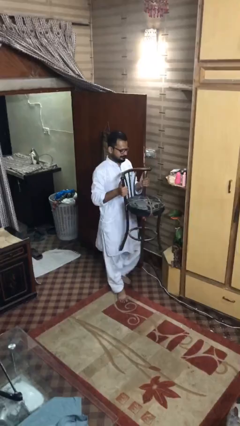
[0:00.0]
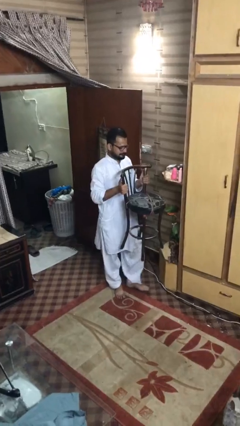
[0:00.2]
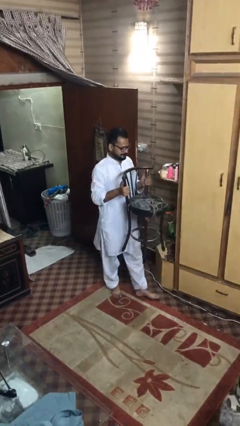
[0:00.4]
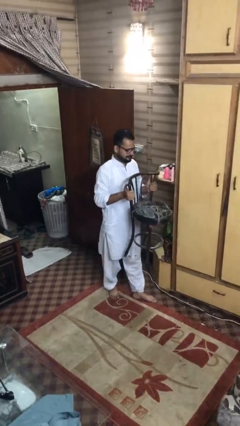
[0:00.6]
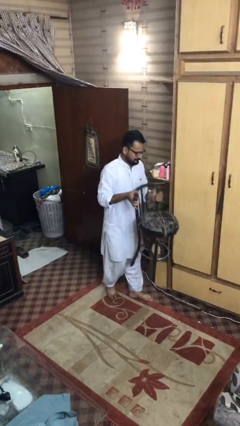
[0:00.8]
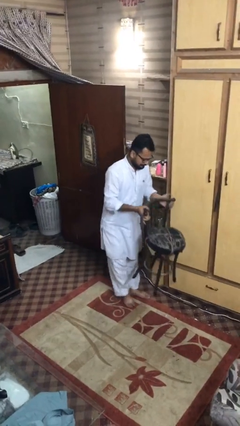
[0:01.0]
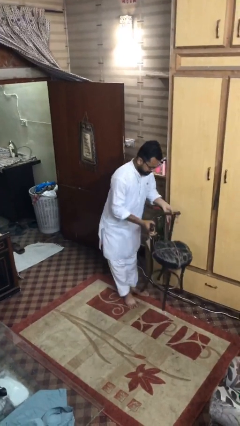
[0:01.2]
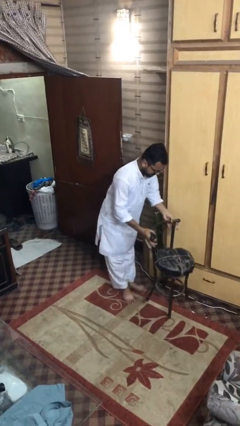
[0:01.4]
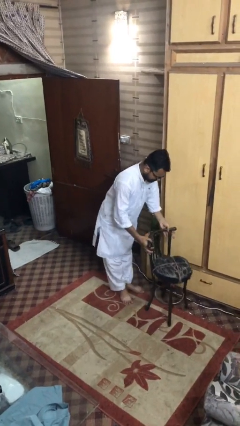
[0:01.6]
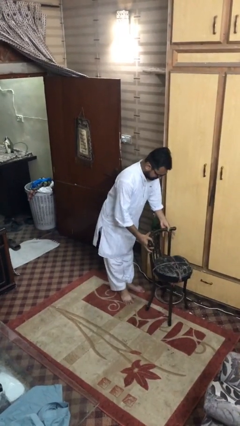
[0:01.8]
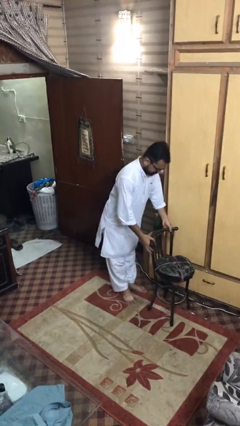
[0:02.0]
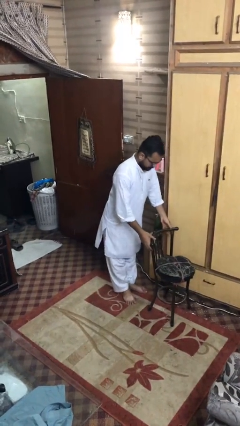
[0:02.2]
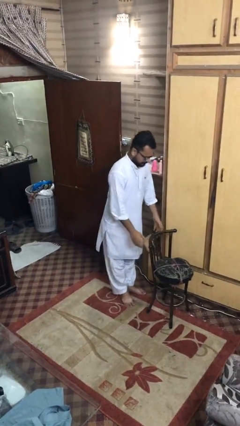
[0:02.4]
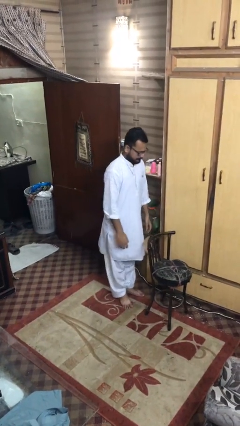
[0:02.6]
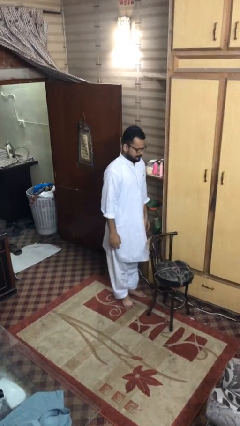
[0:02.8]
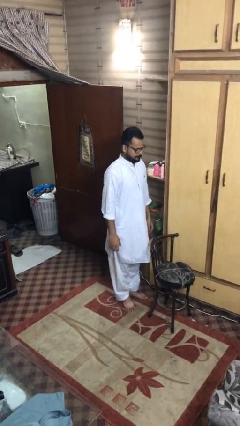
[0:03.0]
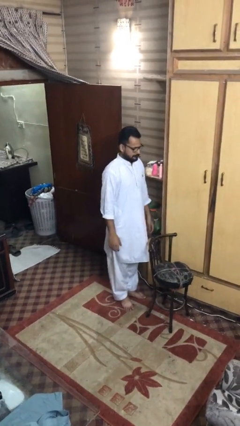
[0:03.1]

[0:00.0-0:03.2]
person puts down object on floor

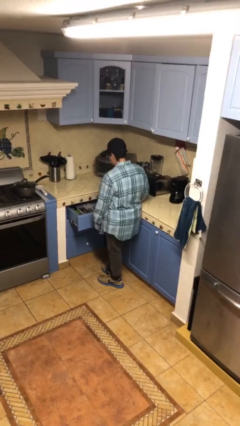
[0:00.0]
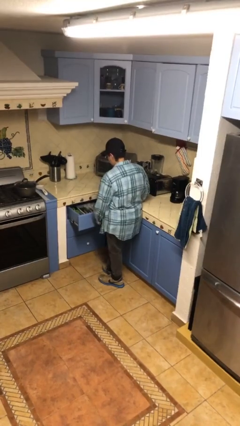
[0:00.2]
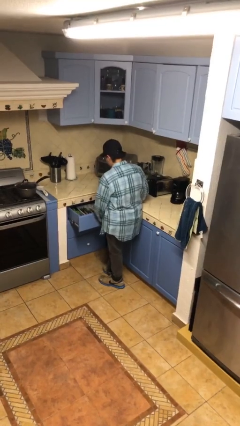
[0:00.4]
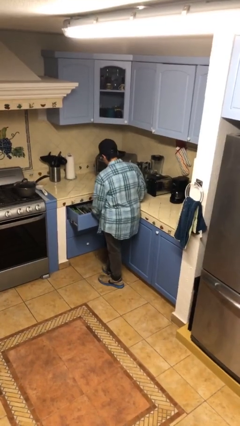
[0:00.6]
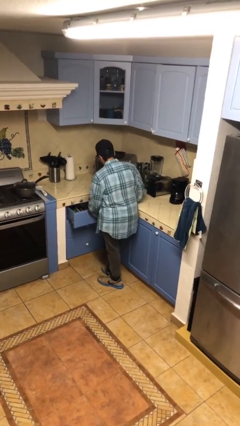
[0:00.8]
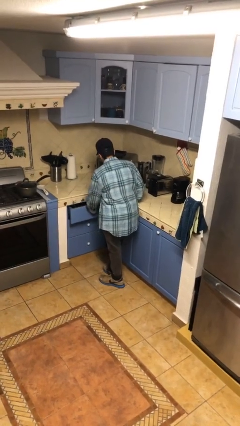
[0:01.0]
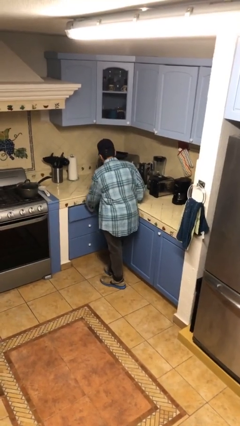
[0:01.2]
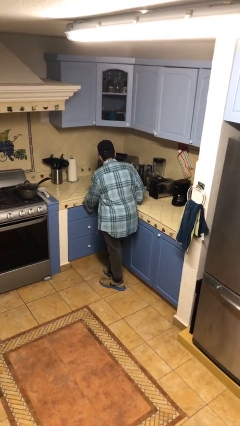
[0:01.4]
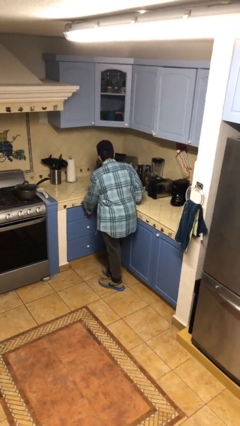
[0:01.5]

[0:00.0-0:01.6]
person closes kitchen drawer

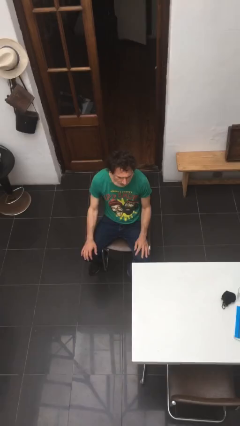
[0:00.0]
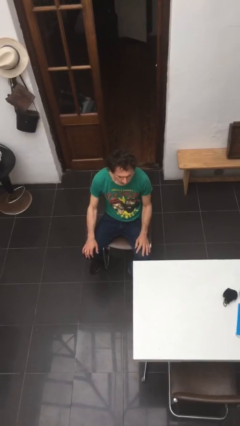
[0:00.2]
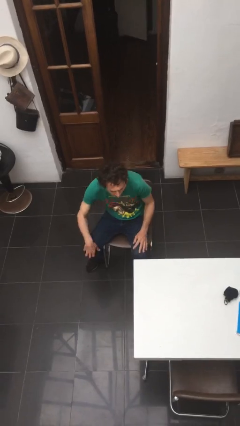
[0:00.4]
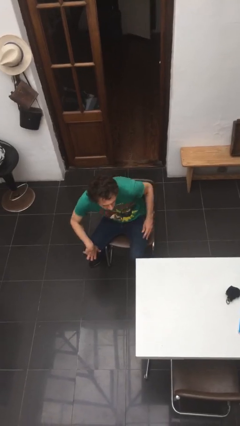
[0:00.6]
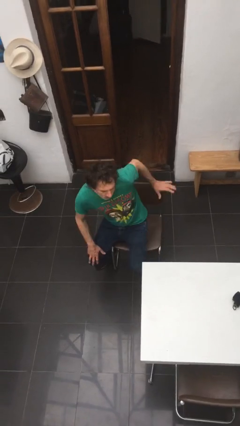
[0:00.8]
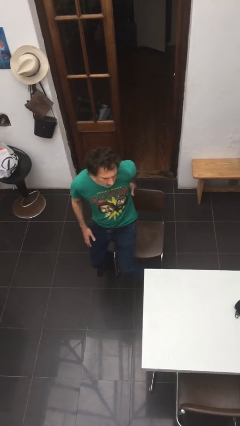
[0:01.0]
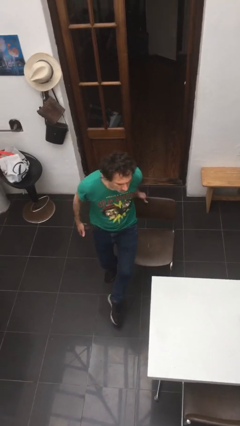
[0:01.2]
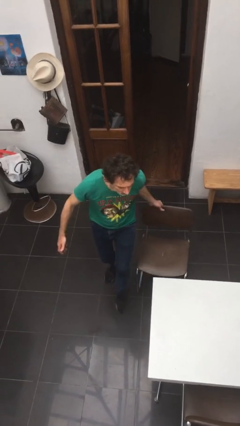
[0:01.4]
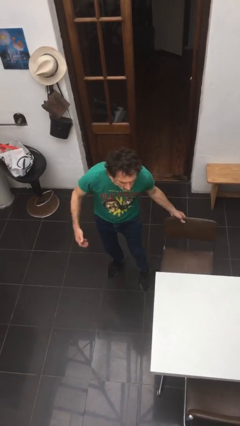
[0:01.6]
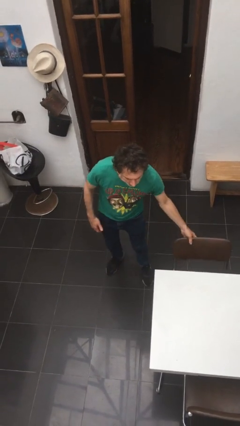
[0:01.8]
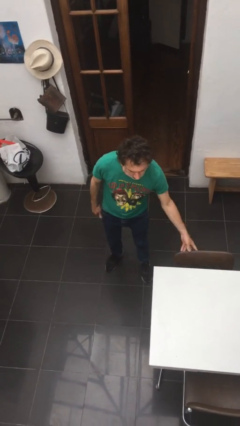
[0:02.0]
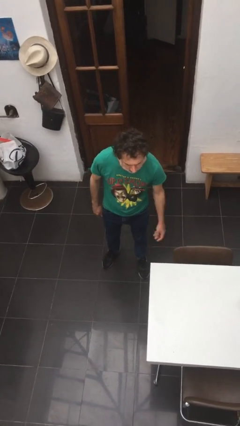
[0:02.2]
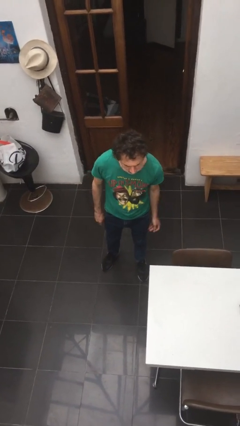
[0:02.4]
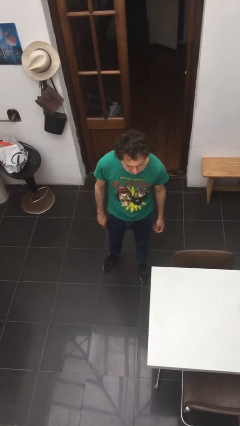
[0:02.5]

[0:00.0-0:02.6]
person stands up

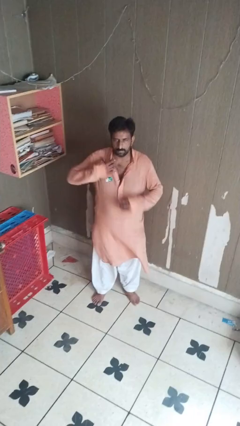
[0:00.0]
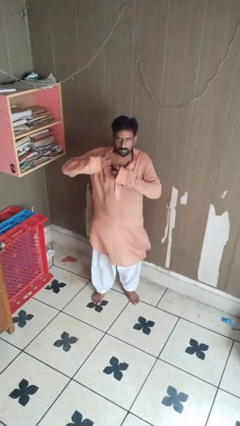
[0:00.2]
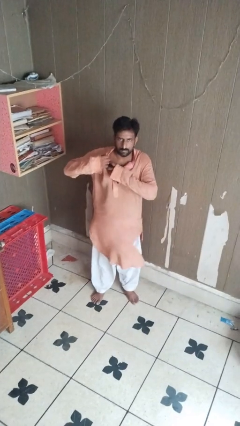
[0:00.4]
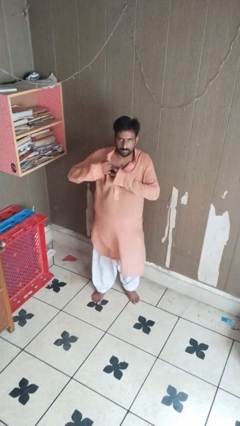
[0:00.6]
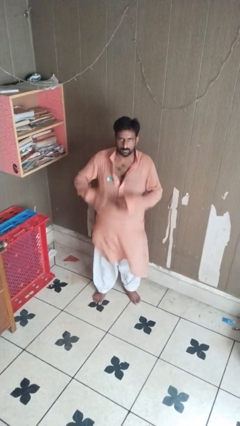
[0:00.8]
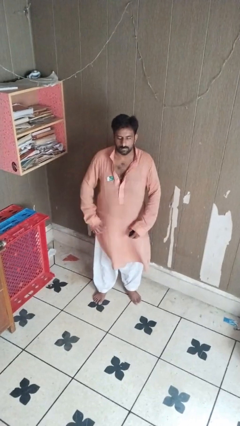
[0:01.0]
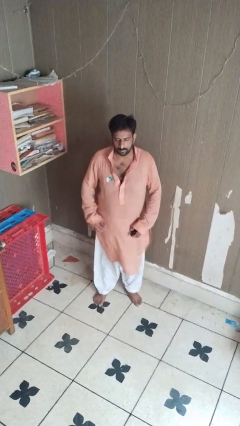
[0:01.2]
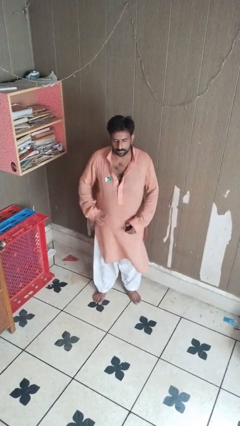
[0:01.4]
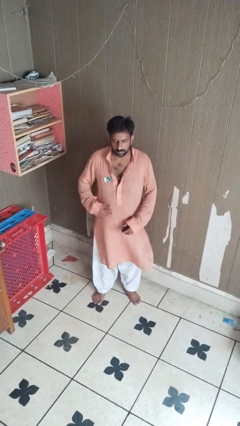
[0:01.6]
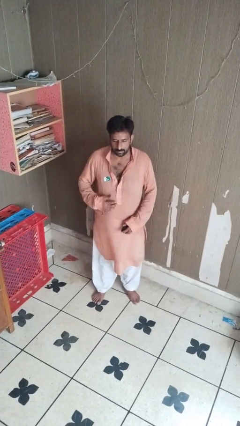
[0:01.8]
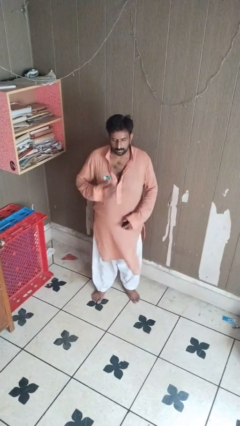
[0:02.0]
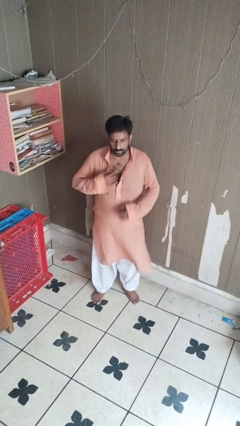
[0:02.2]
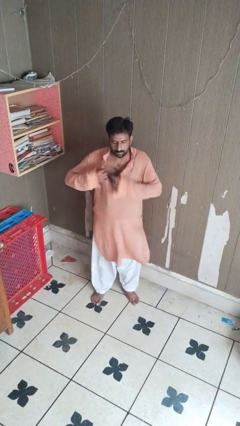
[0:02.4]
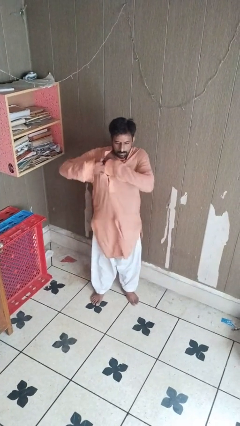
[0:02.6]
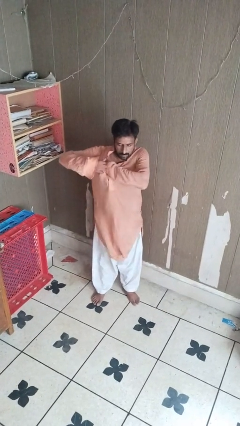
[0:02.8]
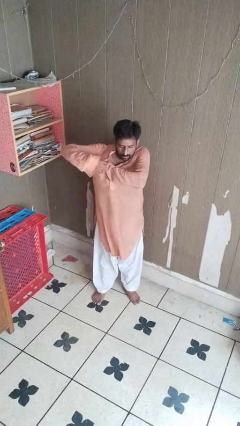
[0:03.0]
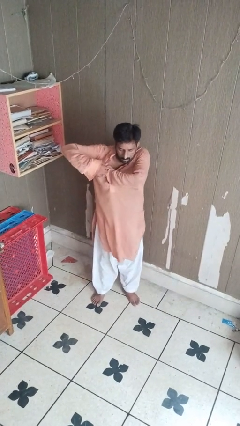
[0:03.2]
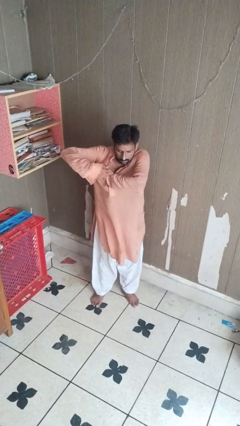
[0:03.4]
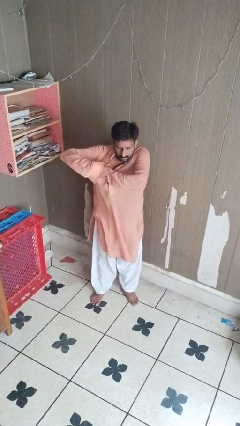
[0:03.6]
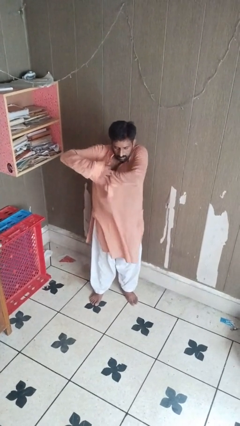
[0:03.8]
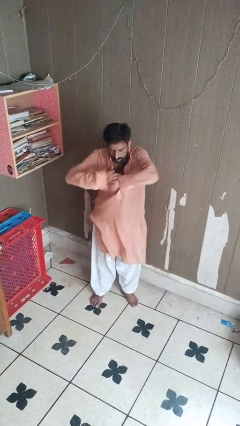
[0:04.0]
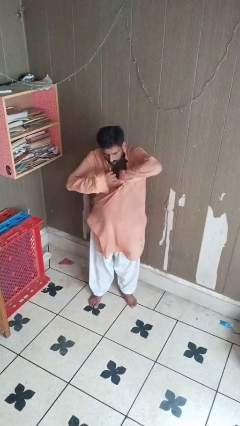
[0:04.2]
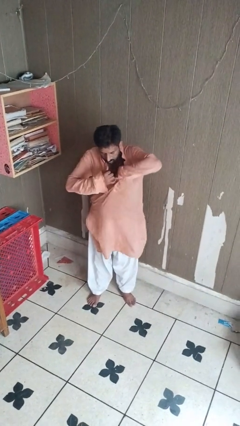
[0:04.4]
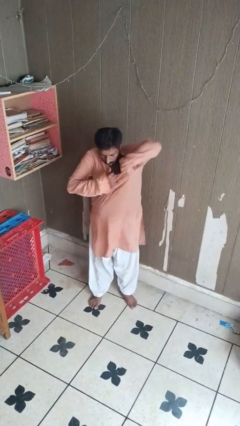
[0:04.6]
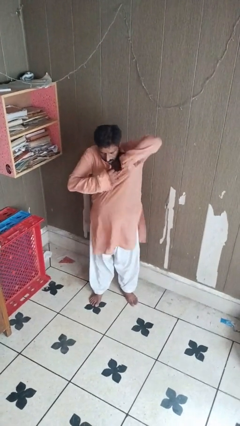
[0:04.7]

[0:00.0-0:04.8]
person applies deodorant

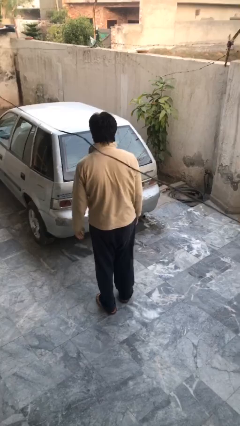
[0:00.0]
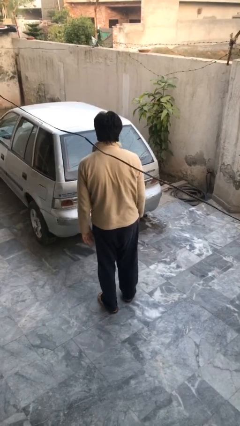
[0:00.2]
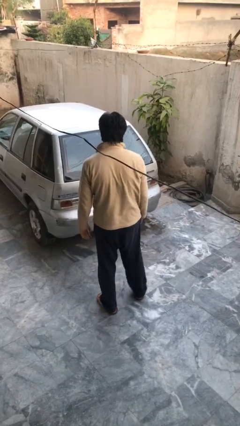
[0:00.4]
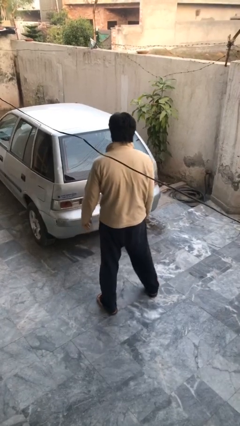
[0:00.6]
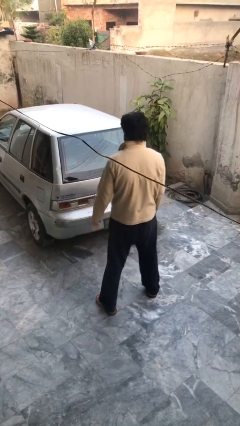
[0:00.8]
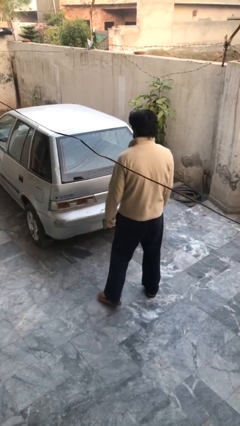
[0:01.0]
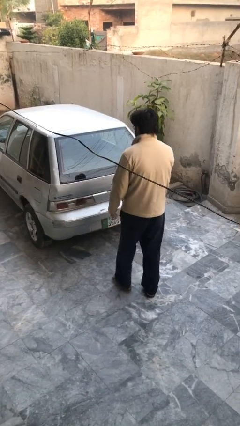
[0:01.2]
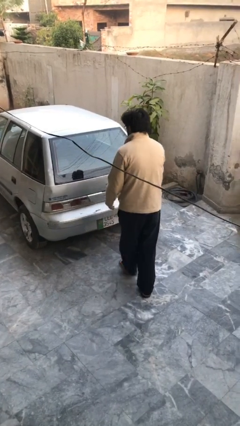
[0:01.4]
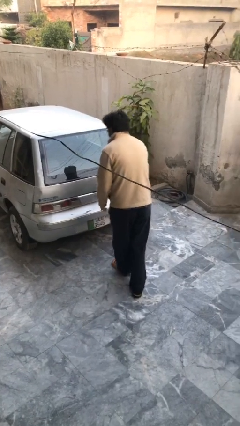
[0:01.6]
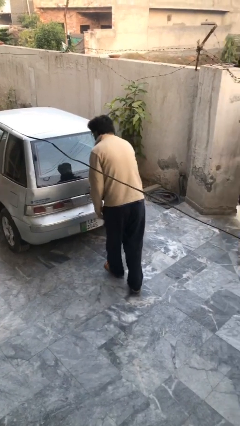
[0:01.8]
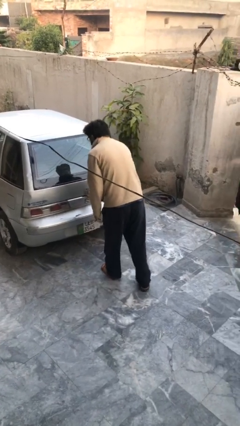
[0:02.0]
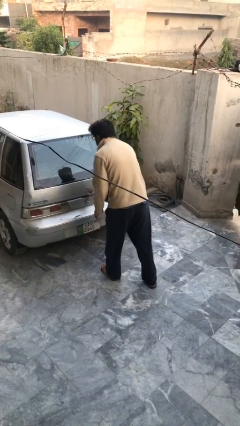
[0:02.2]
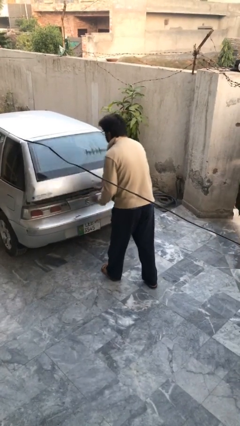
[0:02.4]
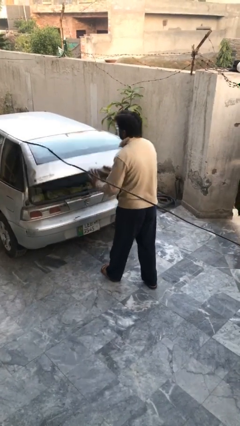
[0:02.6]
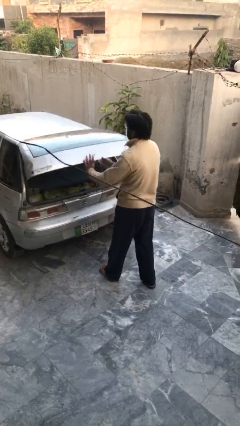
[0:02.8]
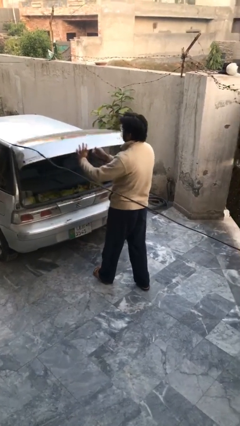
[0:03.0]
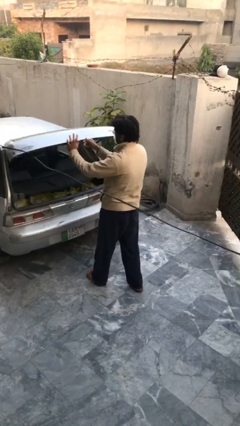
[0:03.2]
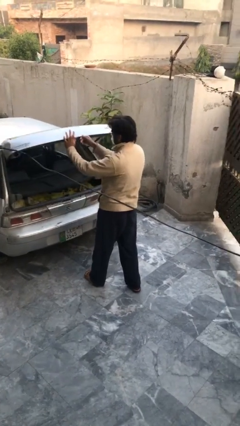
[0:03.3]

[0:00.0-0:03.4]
person opens car trunk

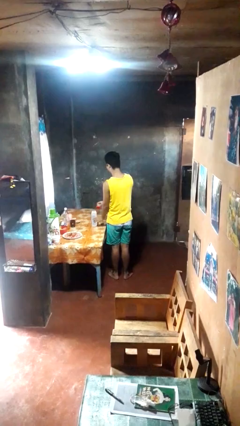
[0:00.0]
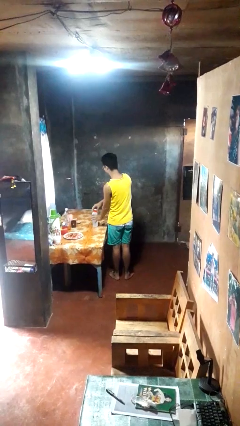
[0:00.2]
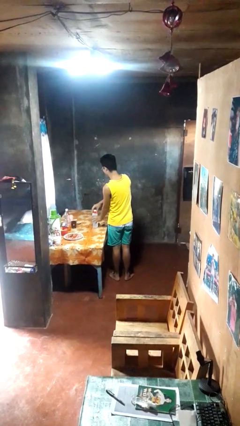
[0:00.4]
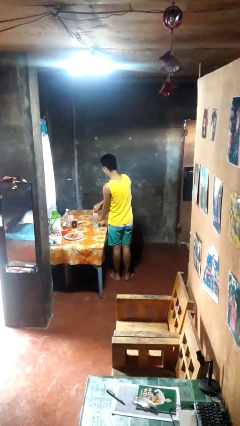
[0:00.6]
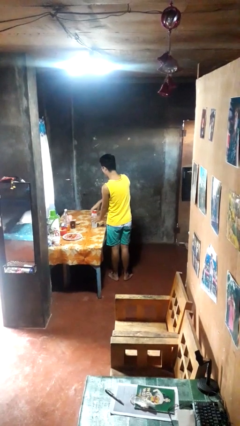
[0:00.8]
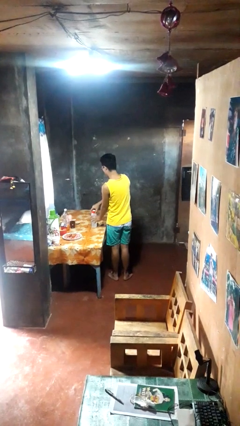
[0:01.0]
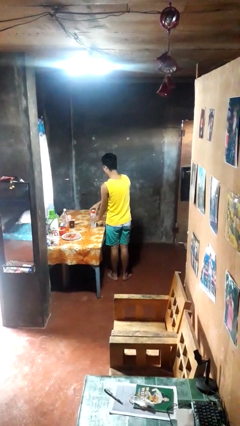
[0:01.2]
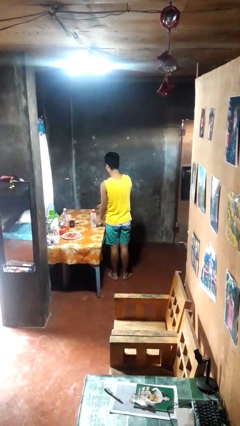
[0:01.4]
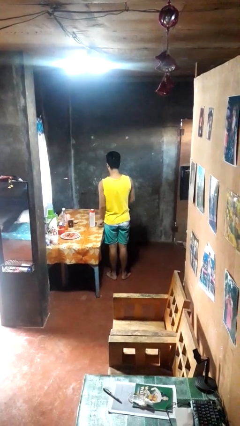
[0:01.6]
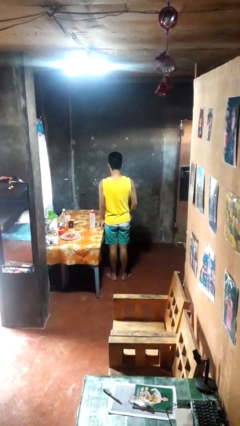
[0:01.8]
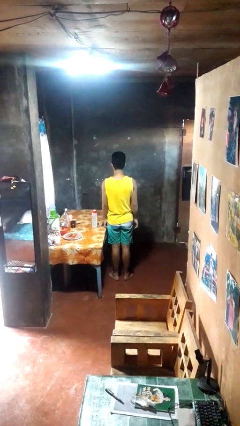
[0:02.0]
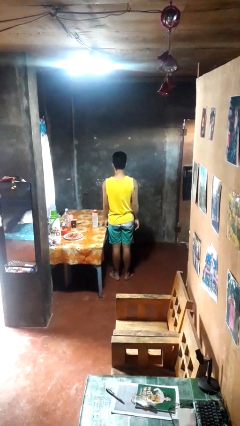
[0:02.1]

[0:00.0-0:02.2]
person closes jar
